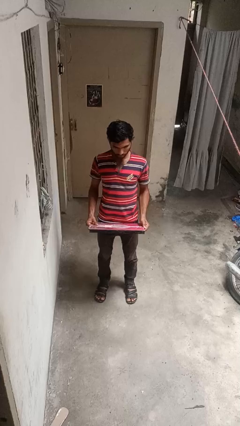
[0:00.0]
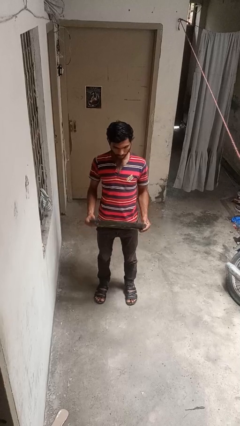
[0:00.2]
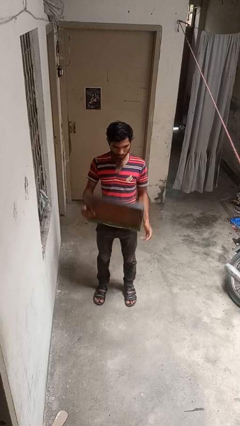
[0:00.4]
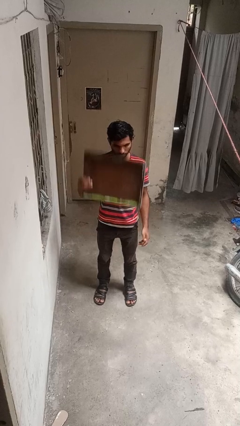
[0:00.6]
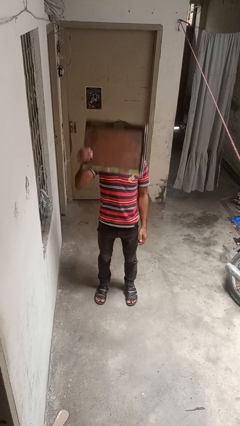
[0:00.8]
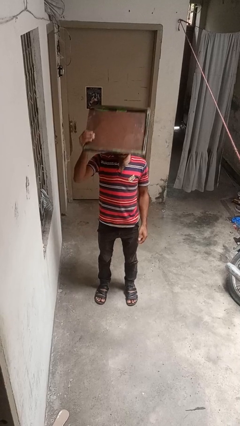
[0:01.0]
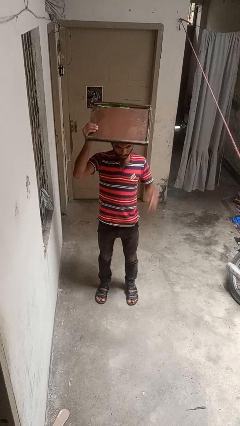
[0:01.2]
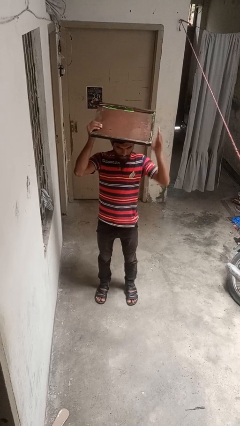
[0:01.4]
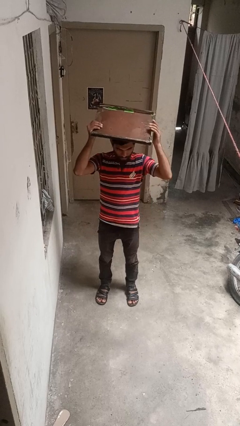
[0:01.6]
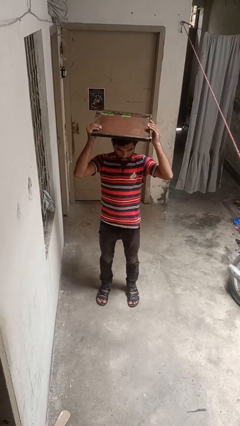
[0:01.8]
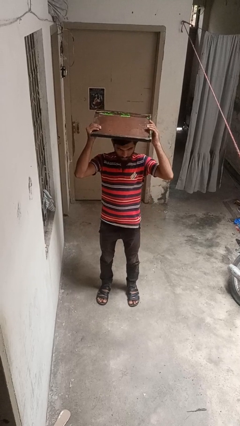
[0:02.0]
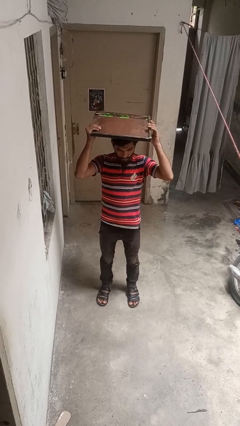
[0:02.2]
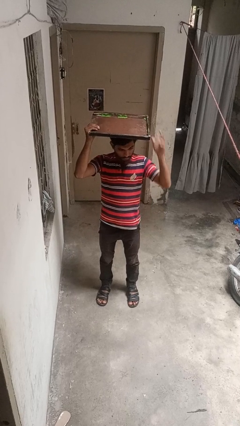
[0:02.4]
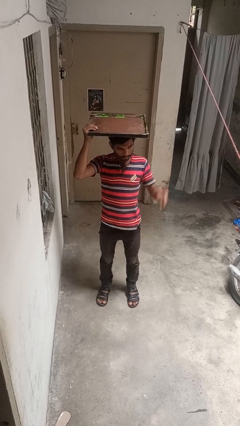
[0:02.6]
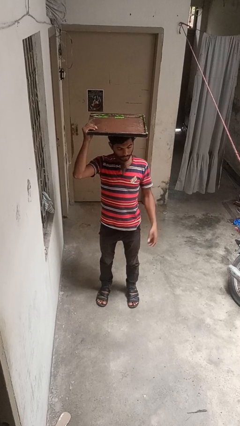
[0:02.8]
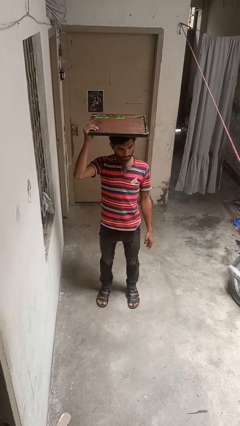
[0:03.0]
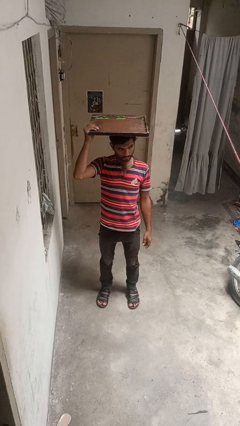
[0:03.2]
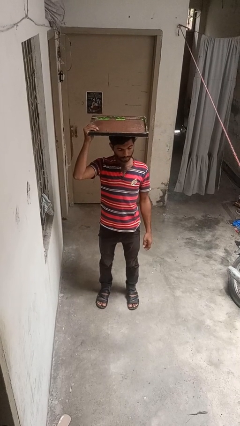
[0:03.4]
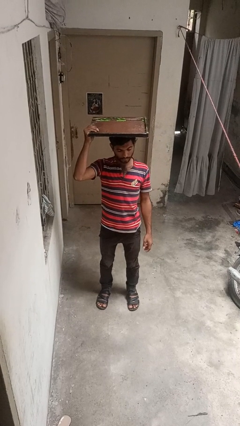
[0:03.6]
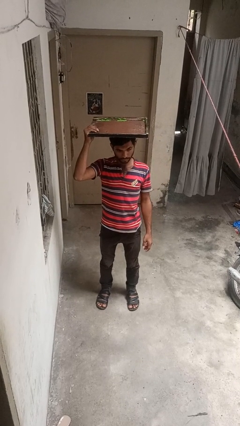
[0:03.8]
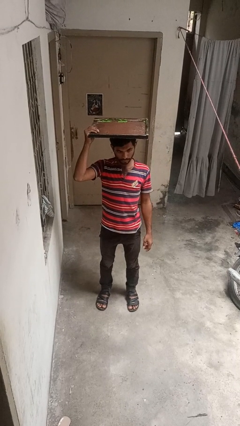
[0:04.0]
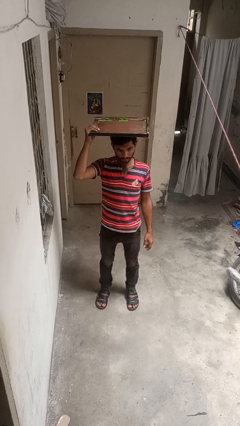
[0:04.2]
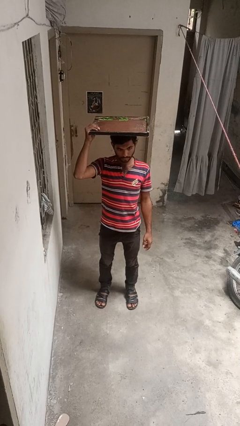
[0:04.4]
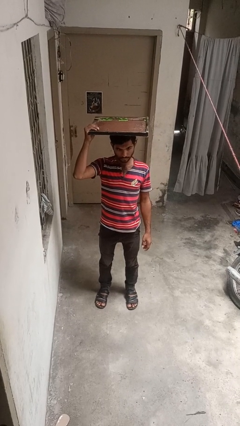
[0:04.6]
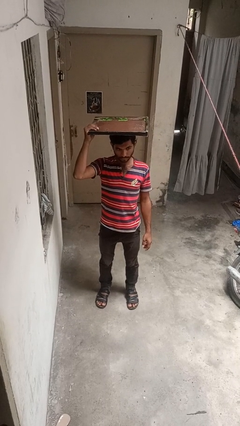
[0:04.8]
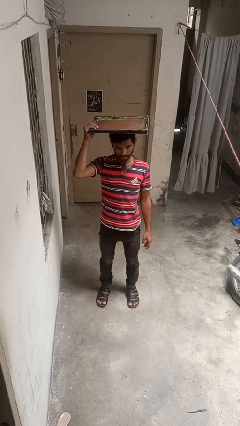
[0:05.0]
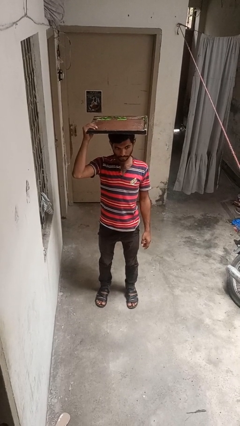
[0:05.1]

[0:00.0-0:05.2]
person holds object above head

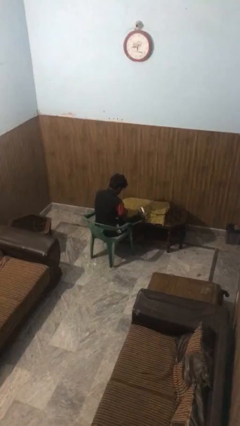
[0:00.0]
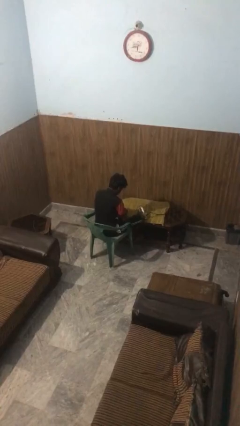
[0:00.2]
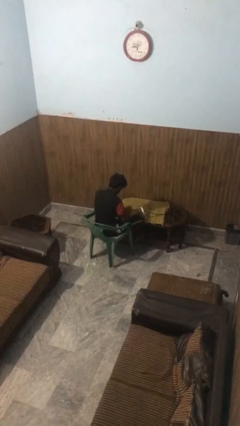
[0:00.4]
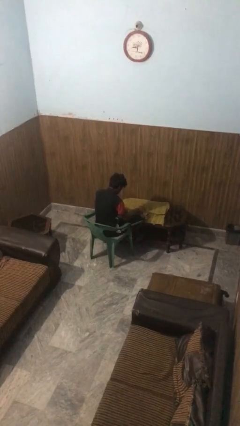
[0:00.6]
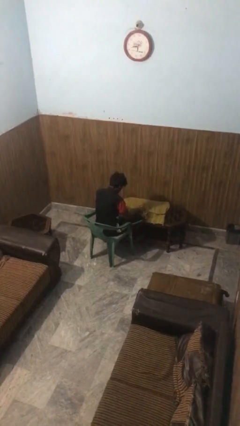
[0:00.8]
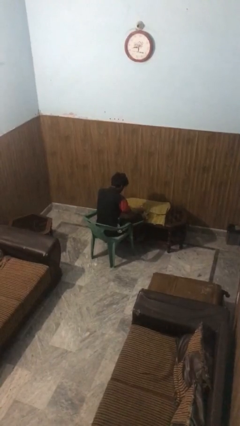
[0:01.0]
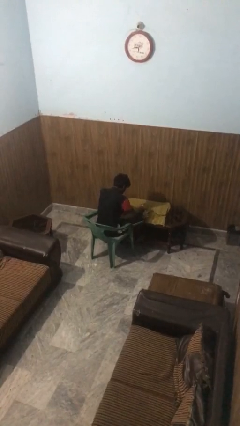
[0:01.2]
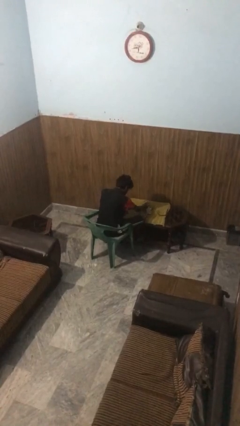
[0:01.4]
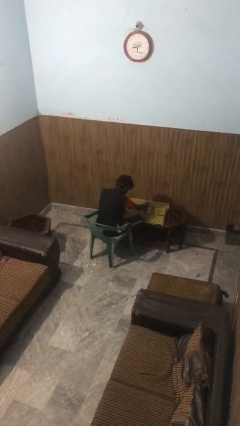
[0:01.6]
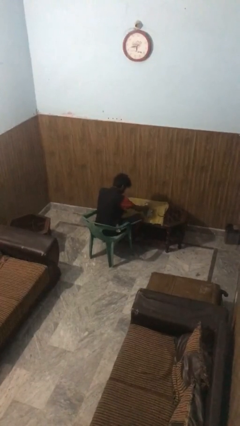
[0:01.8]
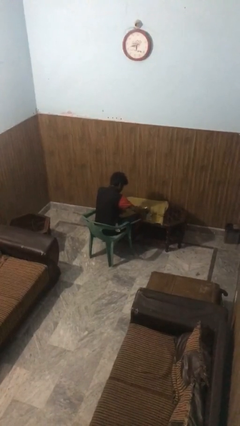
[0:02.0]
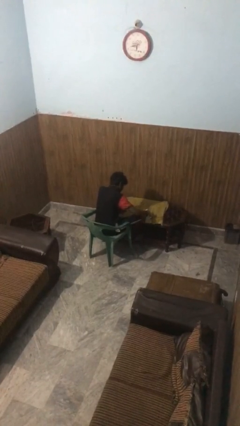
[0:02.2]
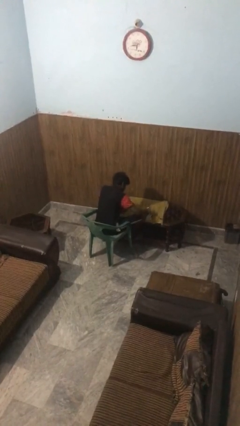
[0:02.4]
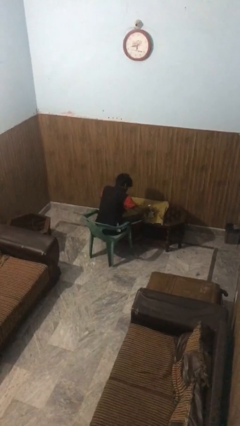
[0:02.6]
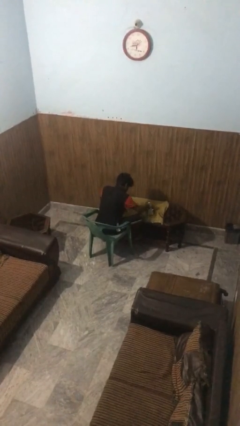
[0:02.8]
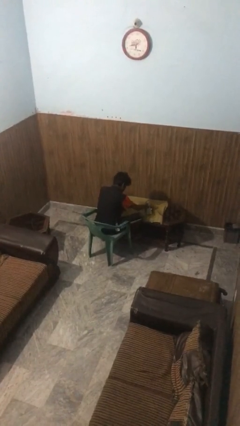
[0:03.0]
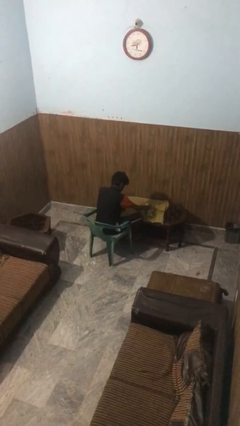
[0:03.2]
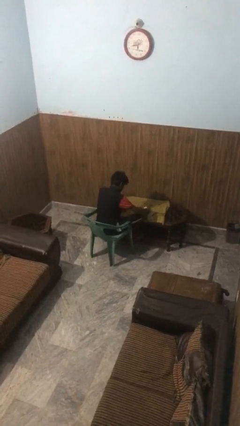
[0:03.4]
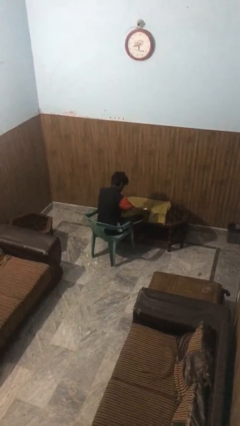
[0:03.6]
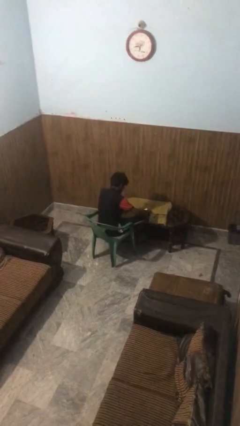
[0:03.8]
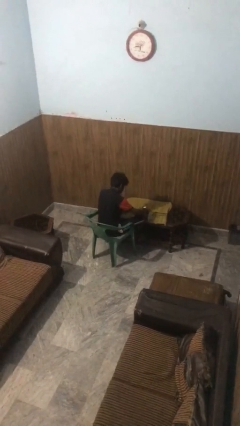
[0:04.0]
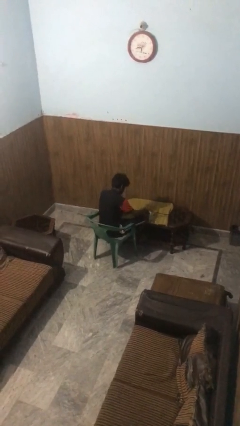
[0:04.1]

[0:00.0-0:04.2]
person irons clothes

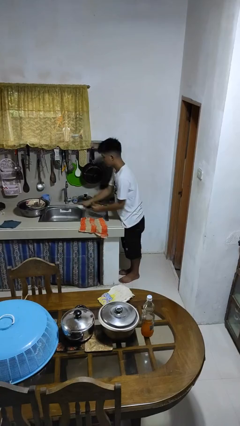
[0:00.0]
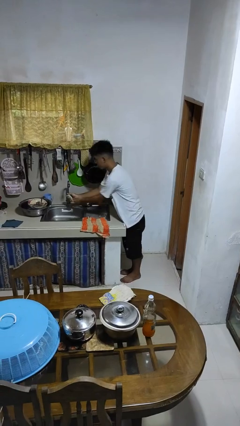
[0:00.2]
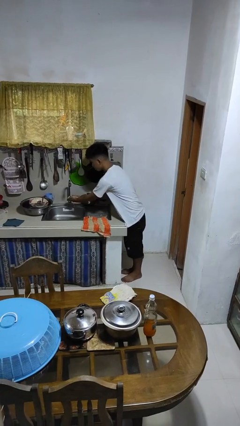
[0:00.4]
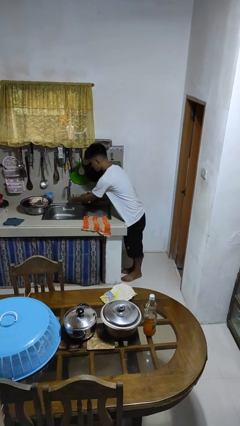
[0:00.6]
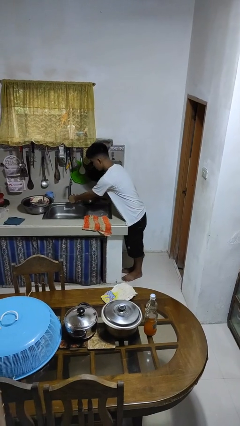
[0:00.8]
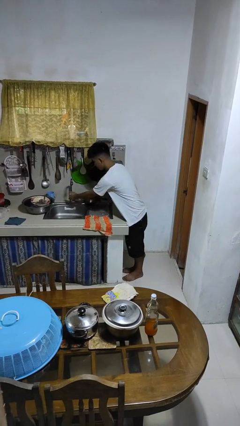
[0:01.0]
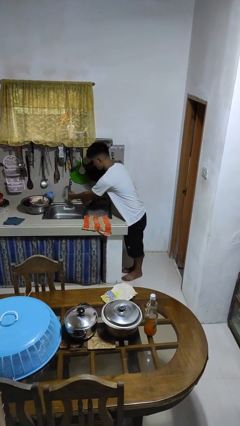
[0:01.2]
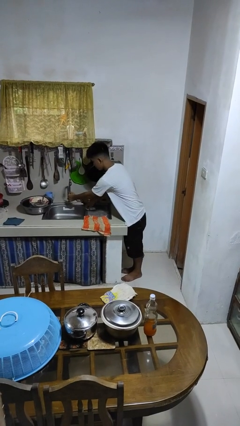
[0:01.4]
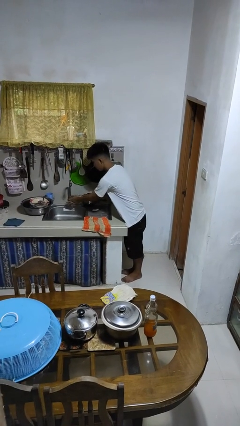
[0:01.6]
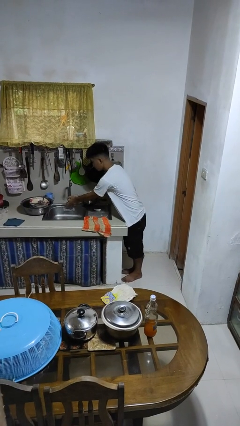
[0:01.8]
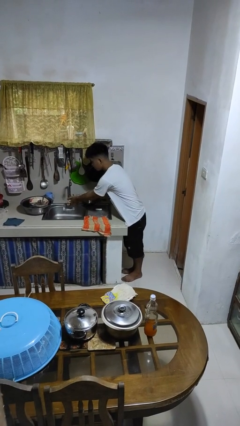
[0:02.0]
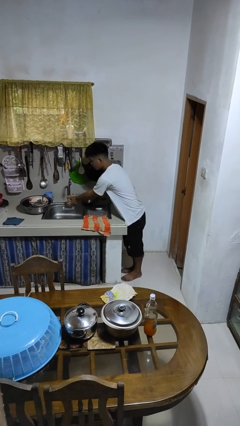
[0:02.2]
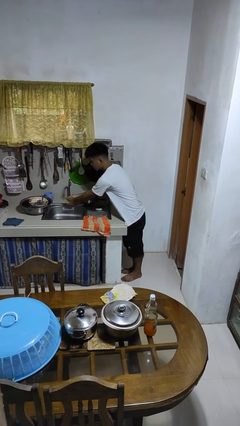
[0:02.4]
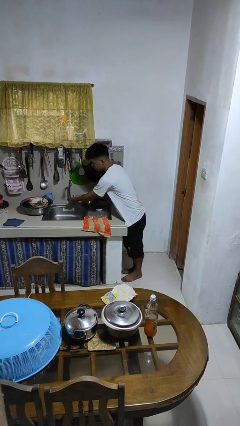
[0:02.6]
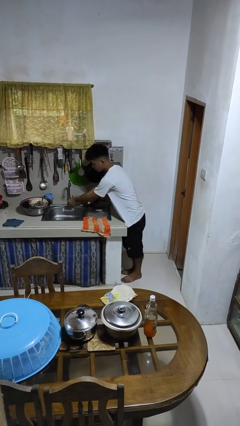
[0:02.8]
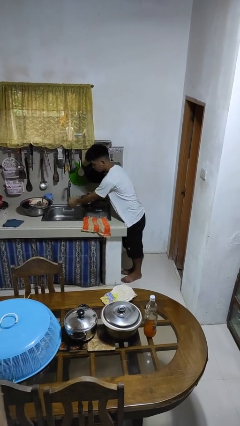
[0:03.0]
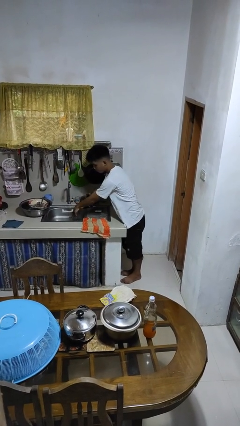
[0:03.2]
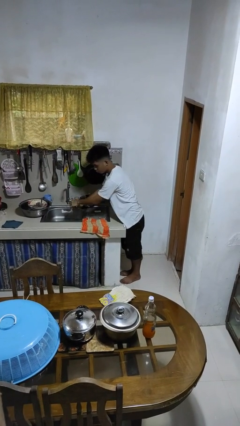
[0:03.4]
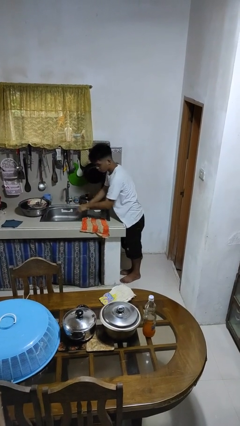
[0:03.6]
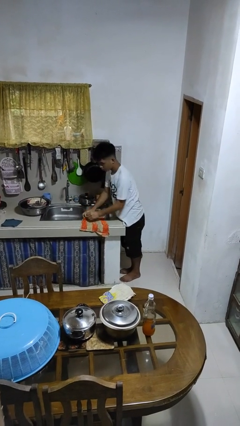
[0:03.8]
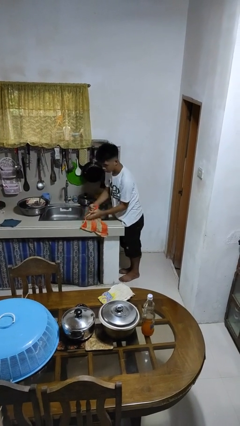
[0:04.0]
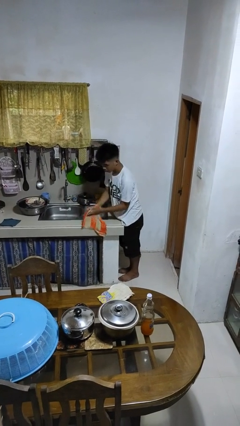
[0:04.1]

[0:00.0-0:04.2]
person washes hands

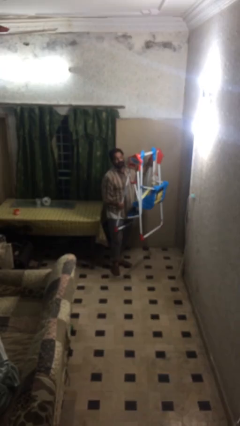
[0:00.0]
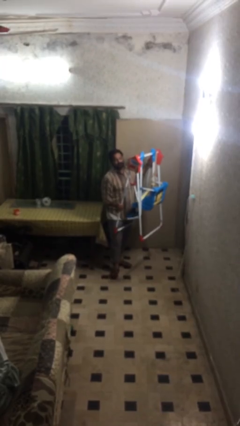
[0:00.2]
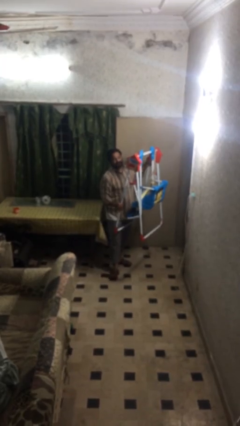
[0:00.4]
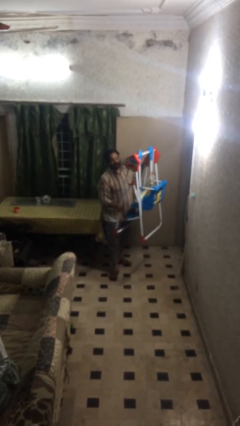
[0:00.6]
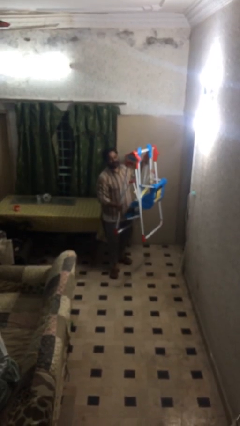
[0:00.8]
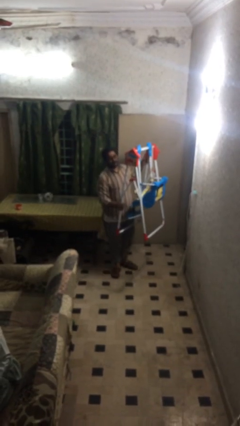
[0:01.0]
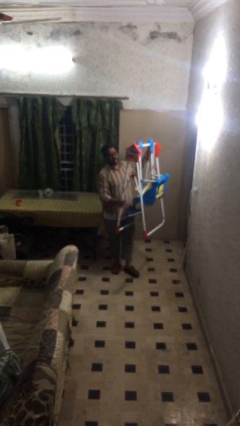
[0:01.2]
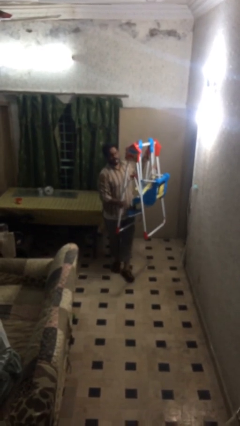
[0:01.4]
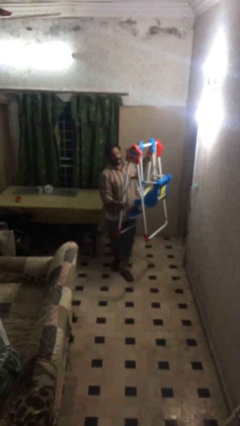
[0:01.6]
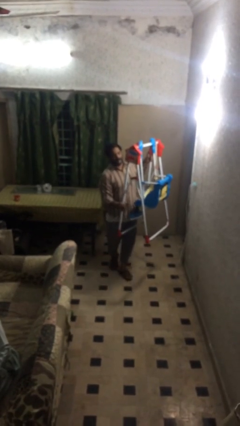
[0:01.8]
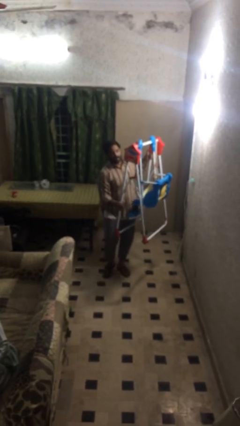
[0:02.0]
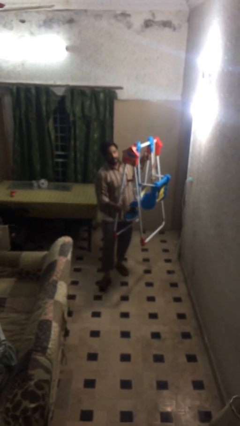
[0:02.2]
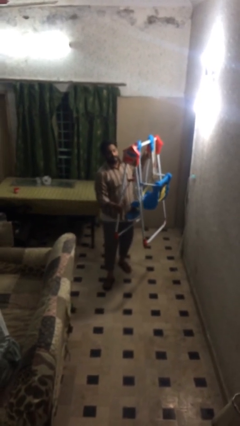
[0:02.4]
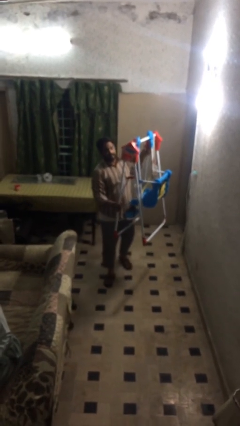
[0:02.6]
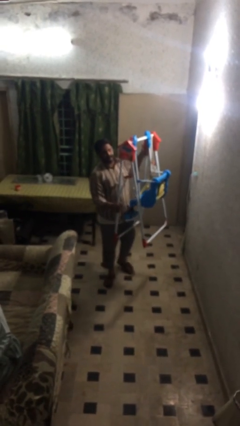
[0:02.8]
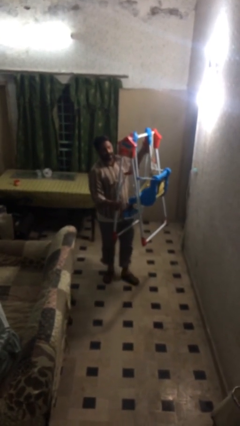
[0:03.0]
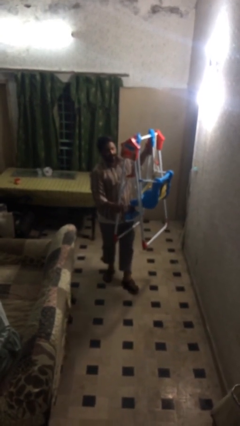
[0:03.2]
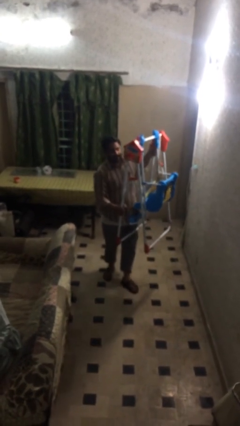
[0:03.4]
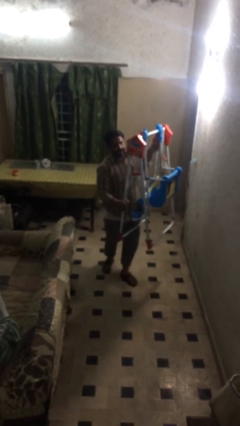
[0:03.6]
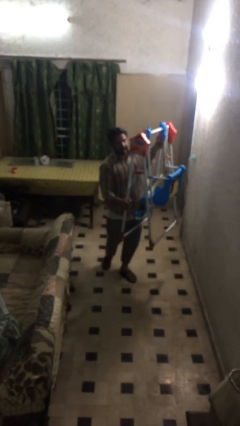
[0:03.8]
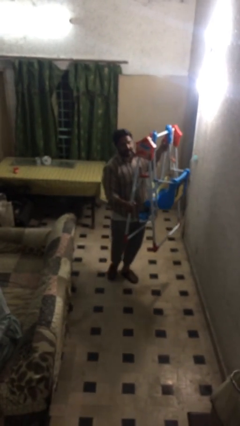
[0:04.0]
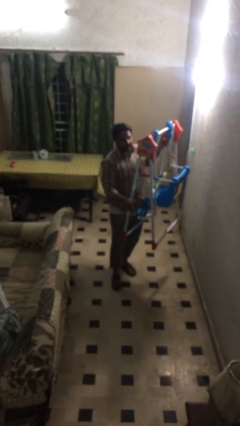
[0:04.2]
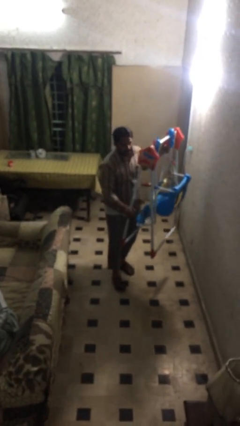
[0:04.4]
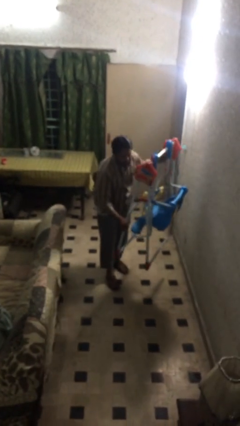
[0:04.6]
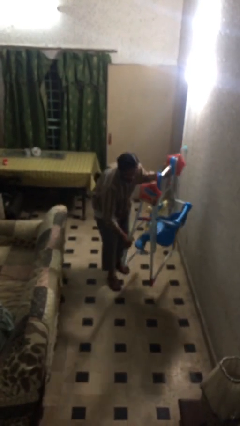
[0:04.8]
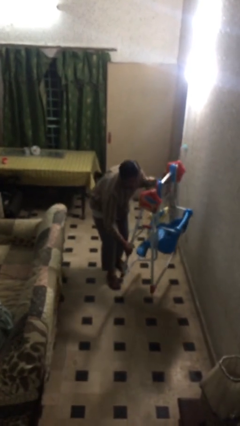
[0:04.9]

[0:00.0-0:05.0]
person carries heavy object
